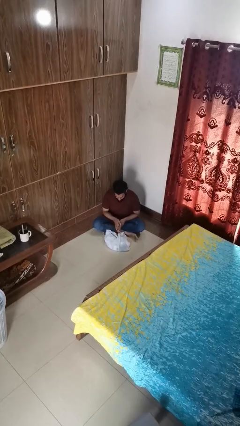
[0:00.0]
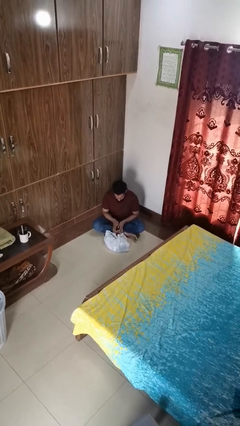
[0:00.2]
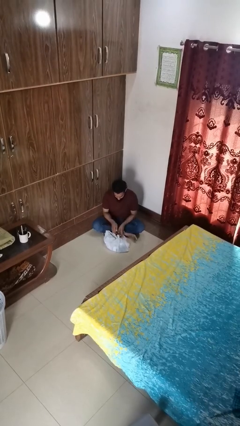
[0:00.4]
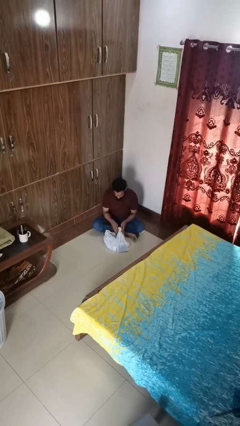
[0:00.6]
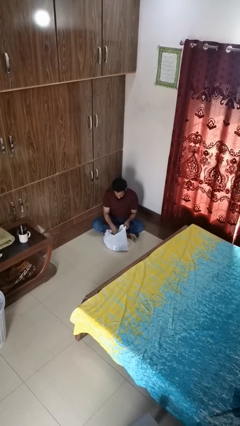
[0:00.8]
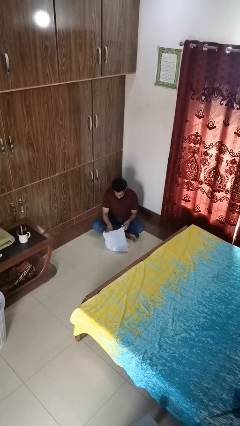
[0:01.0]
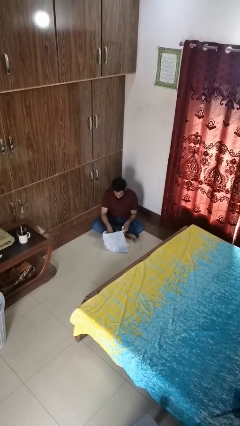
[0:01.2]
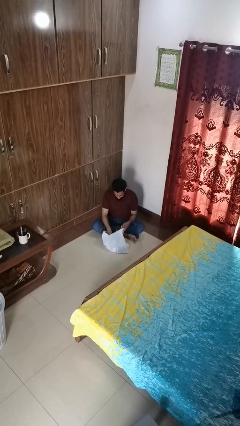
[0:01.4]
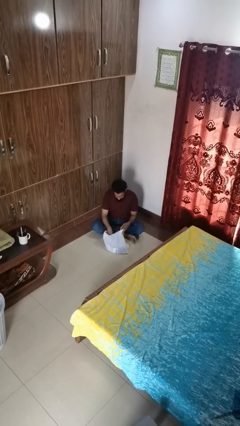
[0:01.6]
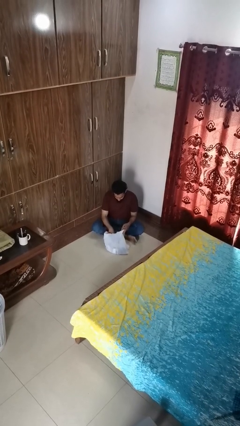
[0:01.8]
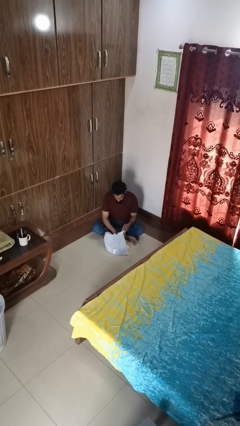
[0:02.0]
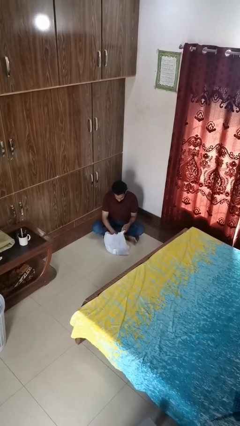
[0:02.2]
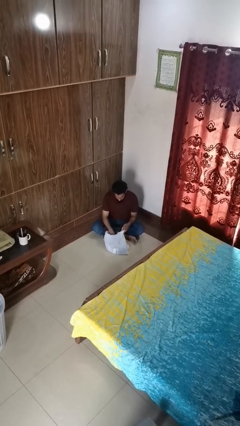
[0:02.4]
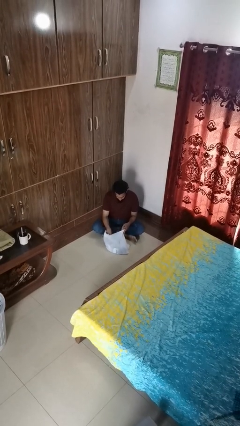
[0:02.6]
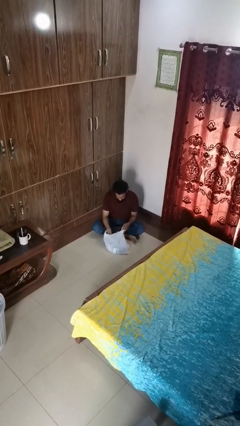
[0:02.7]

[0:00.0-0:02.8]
person searches in bag

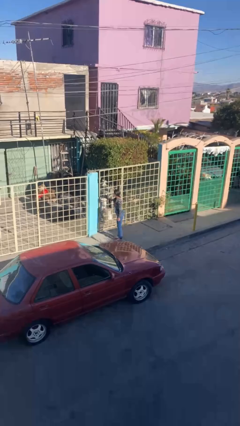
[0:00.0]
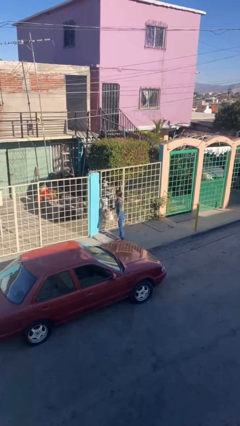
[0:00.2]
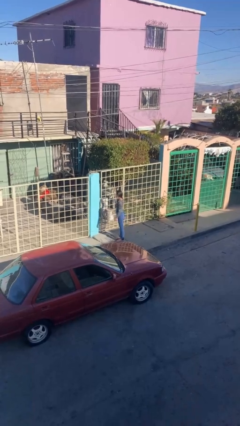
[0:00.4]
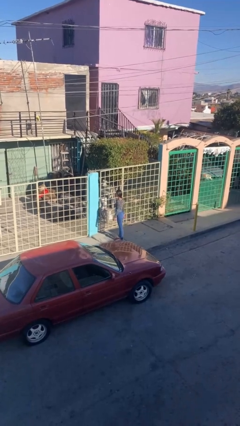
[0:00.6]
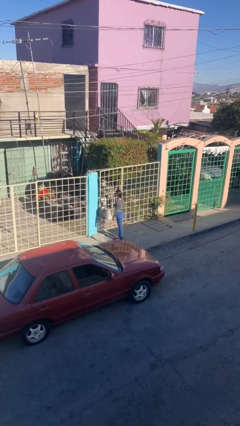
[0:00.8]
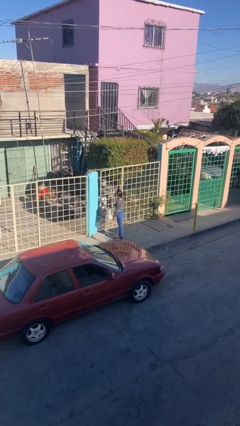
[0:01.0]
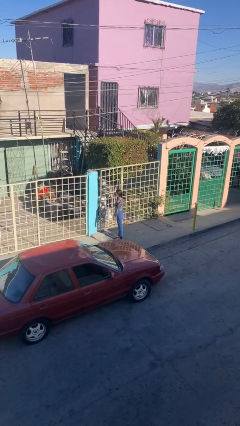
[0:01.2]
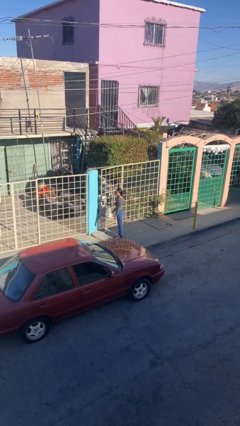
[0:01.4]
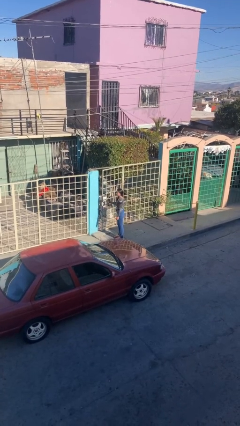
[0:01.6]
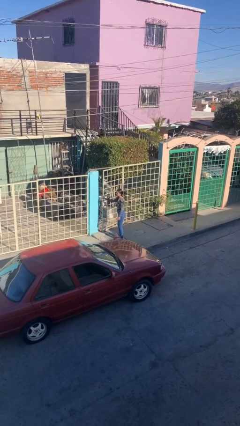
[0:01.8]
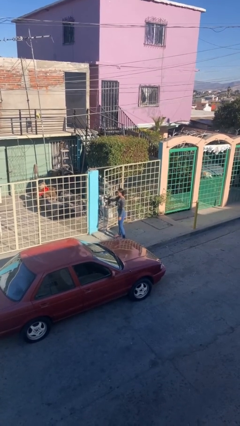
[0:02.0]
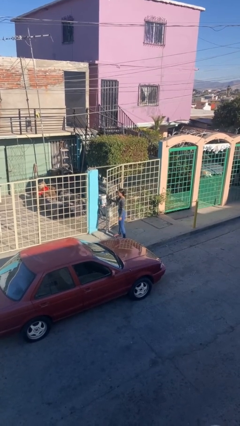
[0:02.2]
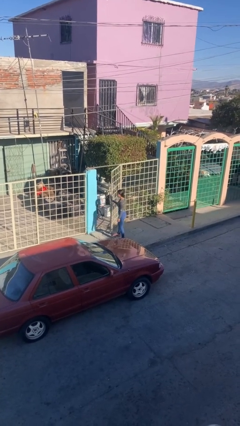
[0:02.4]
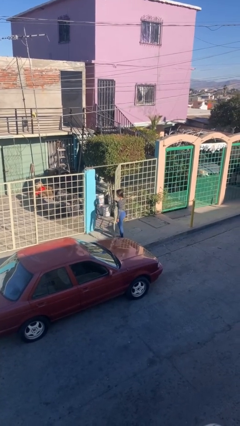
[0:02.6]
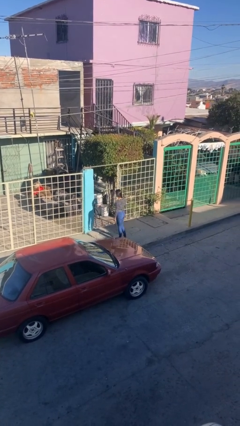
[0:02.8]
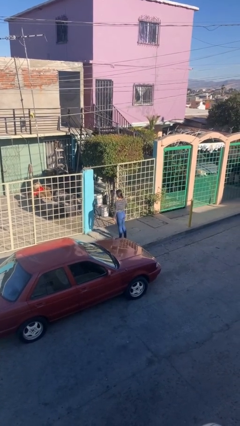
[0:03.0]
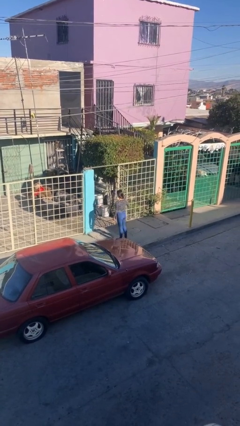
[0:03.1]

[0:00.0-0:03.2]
person opens facility door

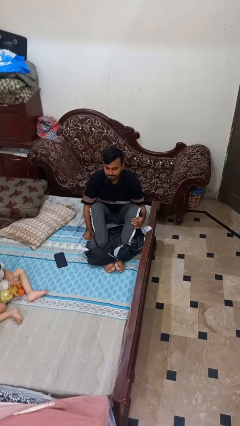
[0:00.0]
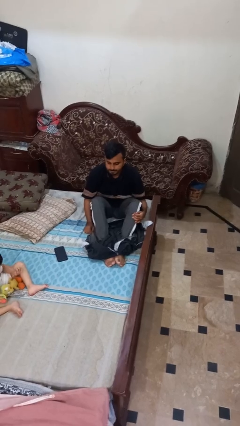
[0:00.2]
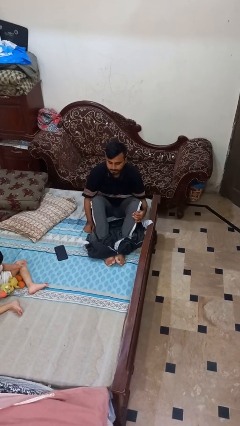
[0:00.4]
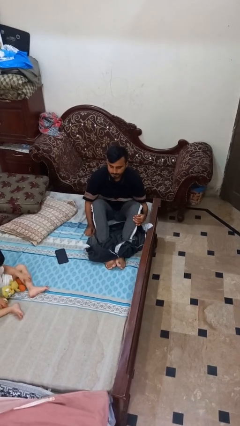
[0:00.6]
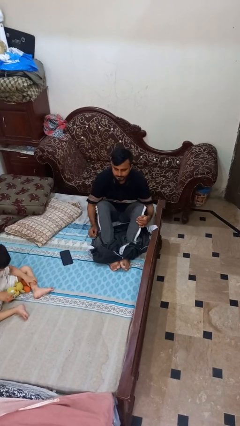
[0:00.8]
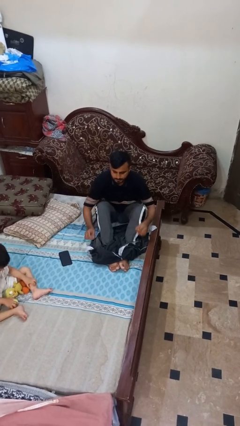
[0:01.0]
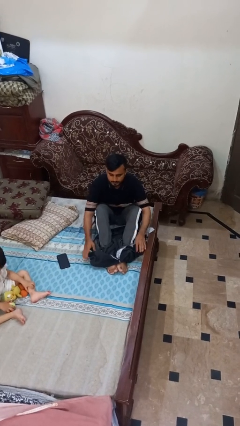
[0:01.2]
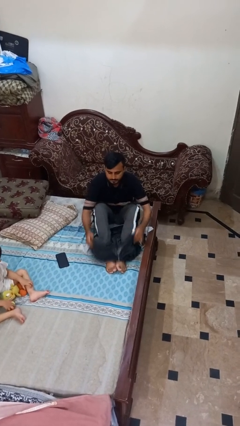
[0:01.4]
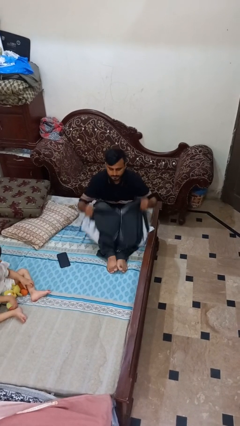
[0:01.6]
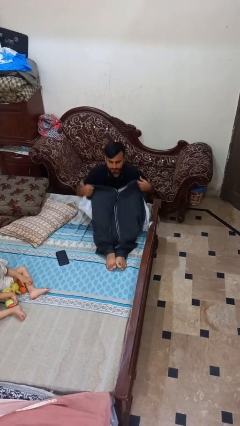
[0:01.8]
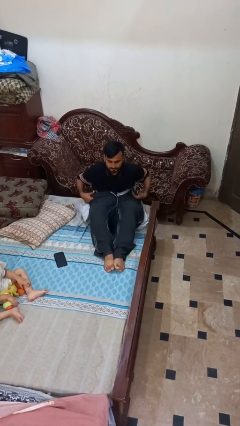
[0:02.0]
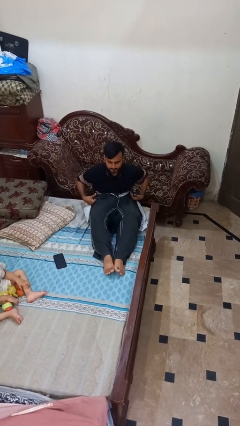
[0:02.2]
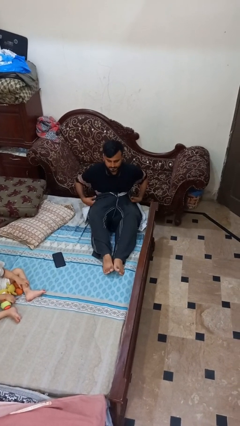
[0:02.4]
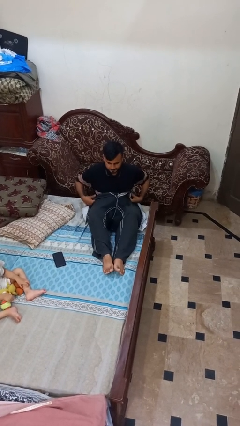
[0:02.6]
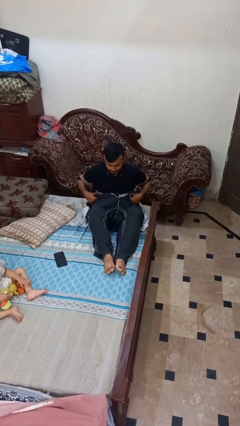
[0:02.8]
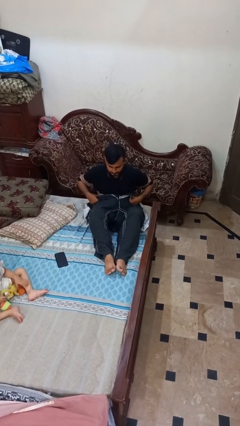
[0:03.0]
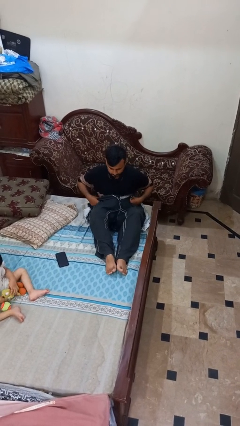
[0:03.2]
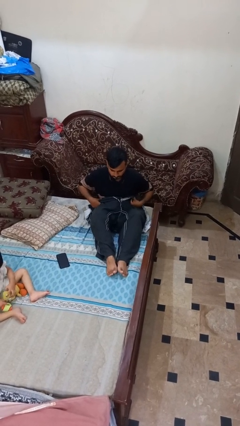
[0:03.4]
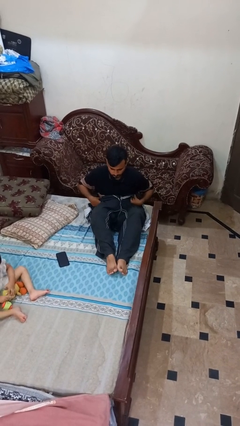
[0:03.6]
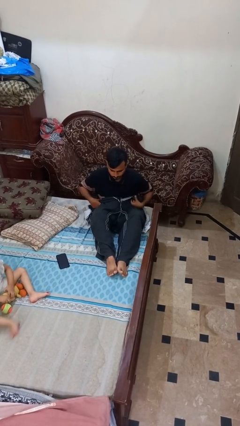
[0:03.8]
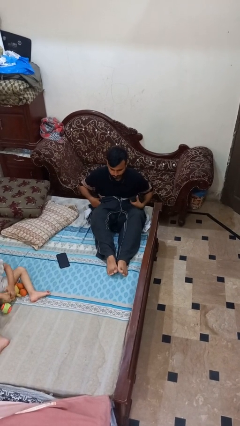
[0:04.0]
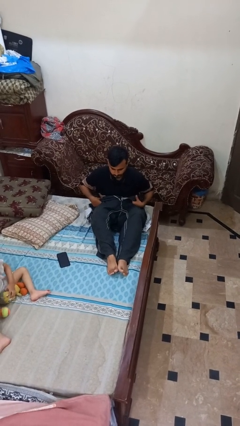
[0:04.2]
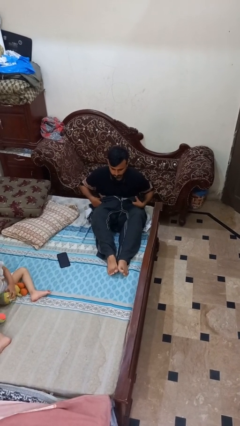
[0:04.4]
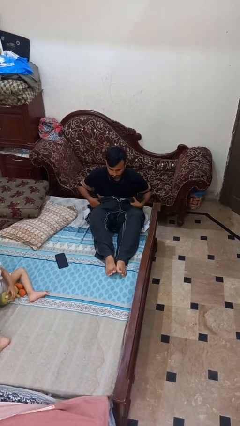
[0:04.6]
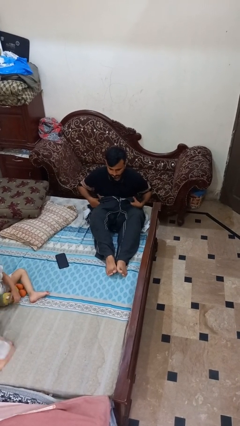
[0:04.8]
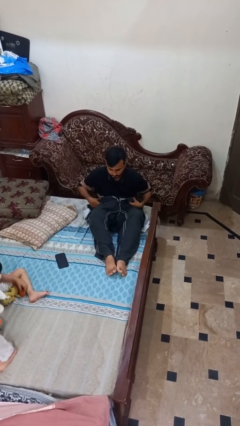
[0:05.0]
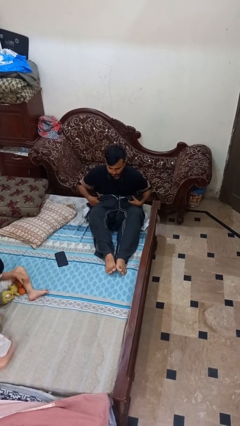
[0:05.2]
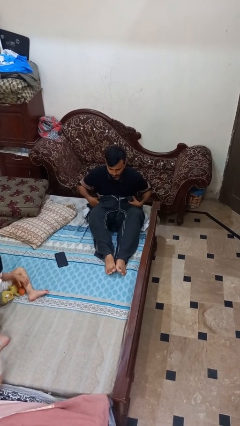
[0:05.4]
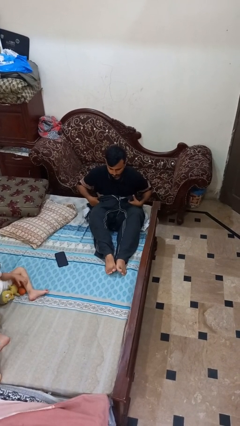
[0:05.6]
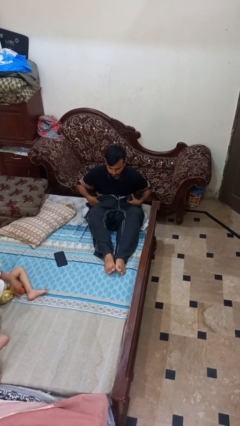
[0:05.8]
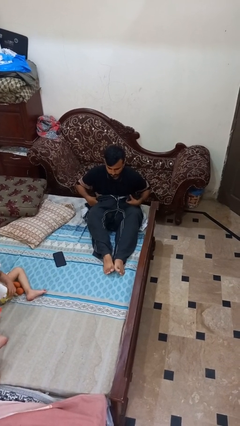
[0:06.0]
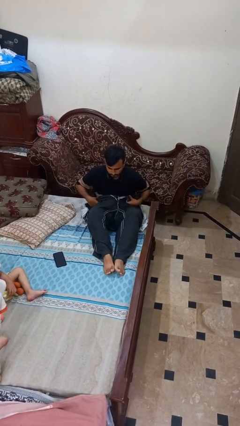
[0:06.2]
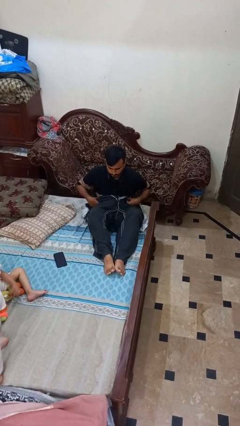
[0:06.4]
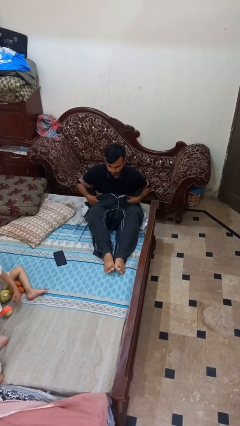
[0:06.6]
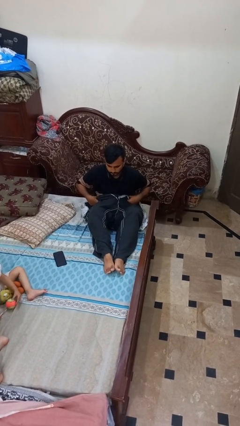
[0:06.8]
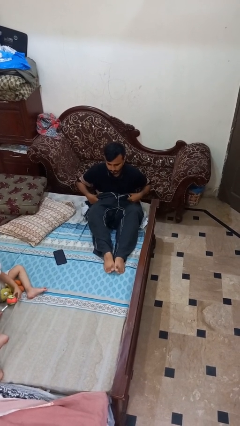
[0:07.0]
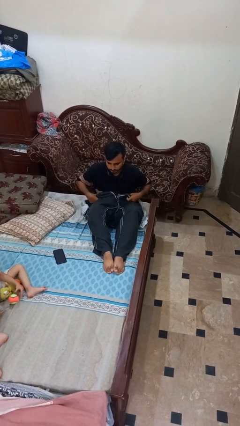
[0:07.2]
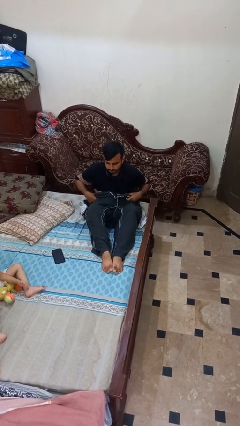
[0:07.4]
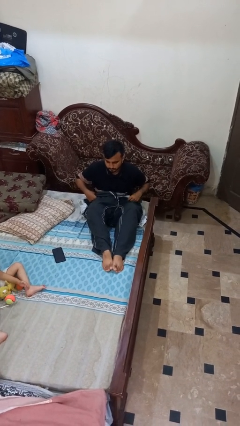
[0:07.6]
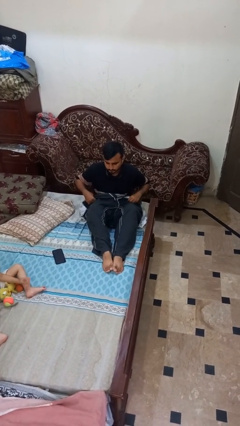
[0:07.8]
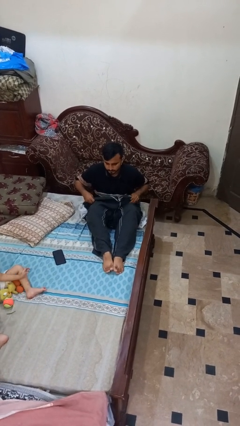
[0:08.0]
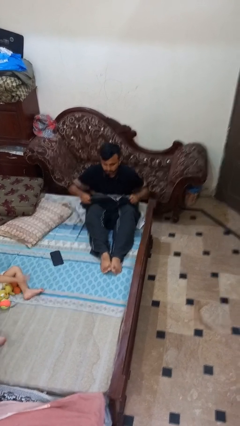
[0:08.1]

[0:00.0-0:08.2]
person puts on pants

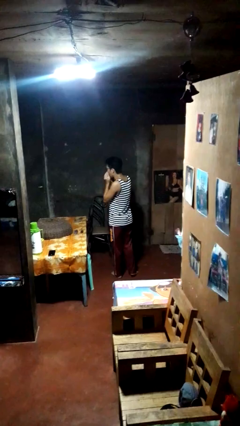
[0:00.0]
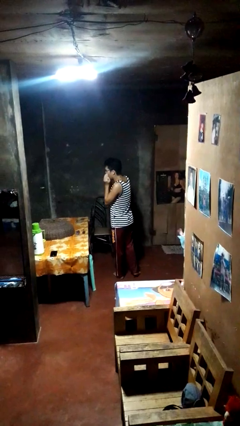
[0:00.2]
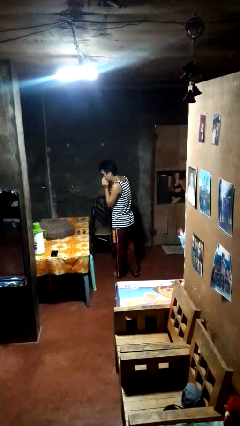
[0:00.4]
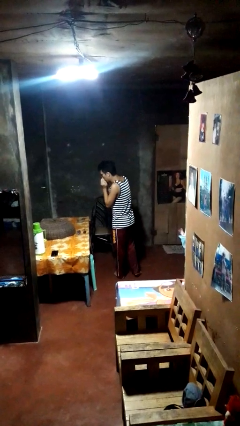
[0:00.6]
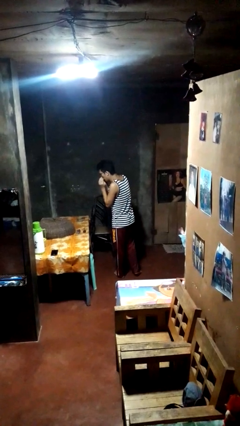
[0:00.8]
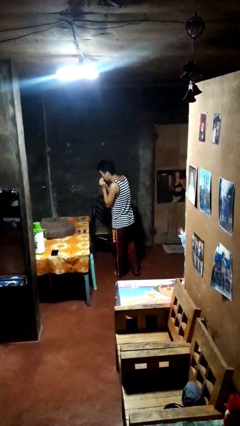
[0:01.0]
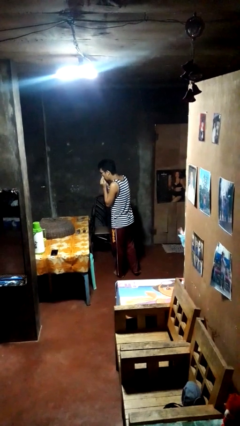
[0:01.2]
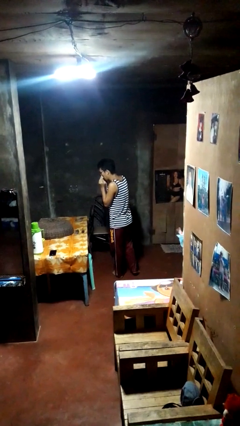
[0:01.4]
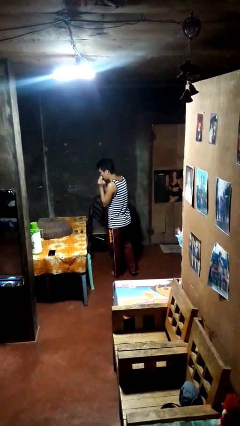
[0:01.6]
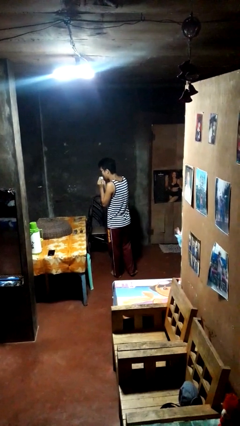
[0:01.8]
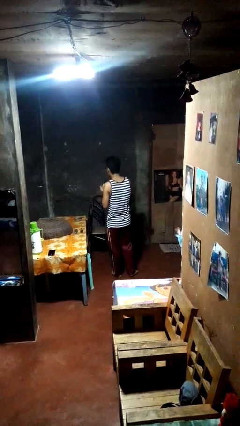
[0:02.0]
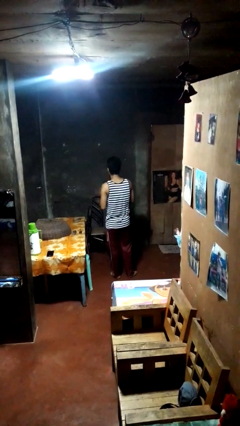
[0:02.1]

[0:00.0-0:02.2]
person blows nose

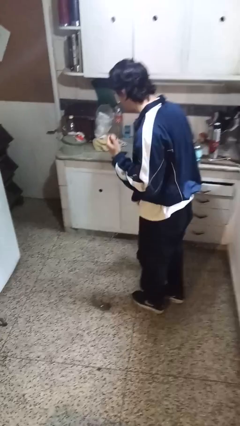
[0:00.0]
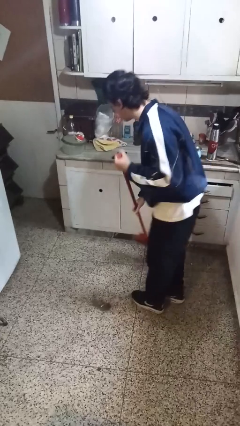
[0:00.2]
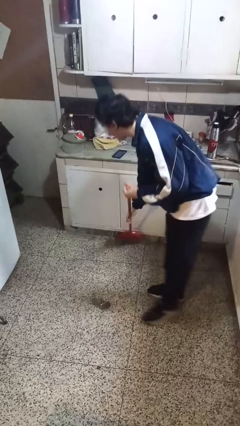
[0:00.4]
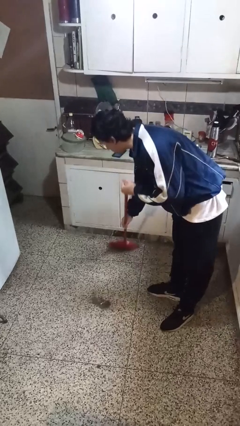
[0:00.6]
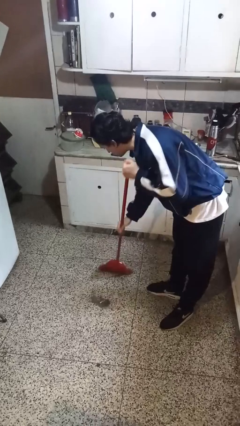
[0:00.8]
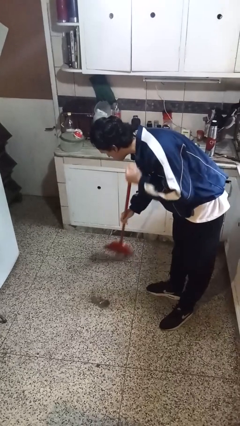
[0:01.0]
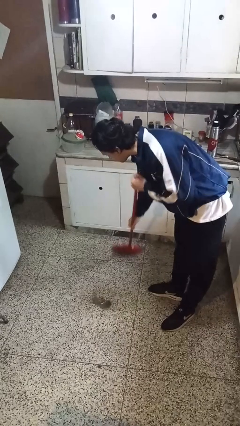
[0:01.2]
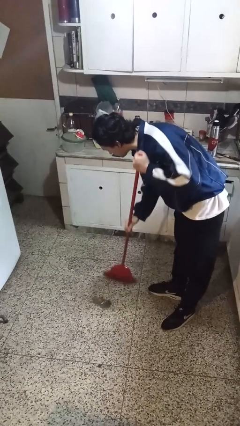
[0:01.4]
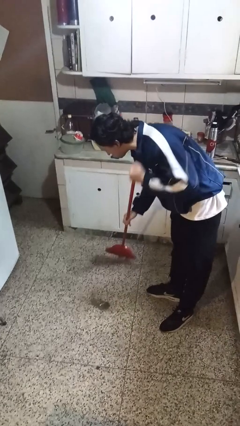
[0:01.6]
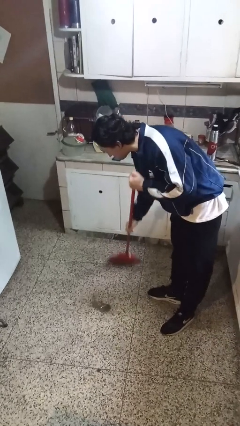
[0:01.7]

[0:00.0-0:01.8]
person sweeps floor
